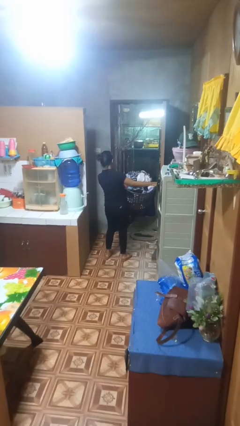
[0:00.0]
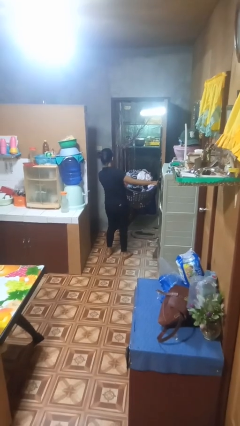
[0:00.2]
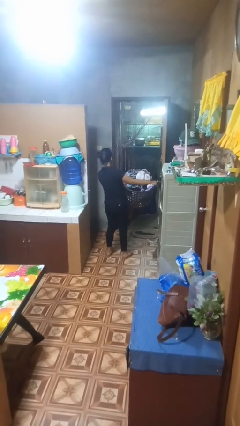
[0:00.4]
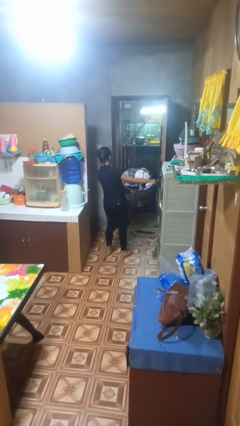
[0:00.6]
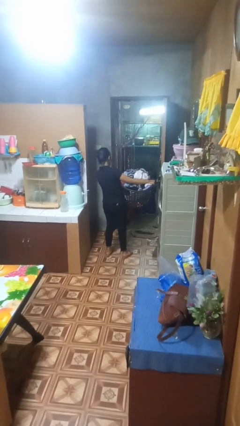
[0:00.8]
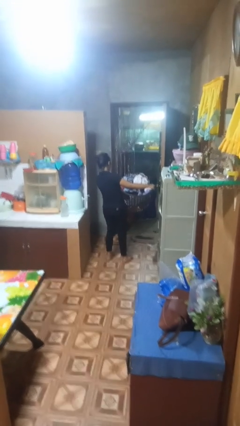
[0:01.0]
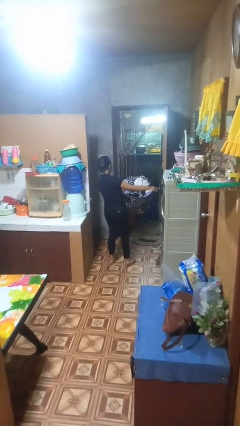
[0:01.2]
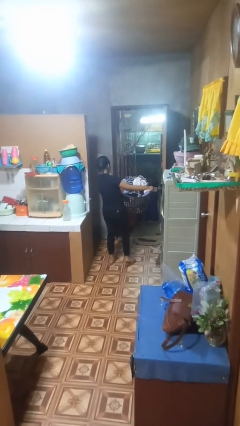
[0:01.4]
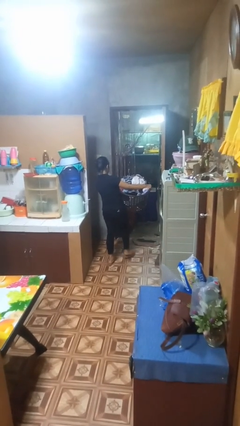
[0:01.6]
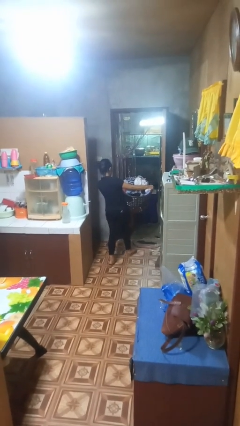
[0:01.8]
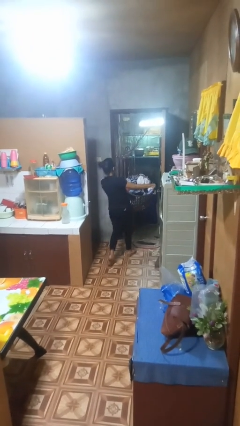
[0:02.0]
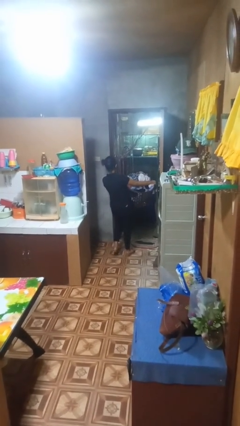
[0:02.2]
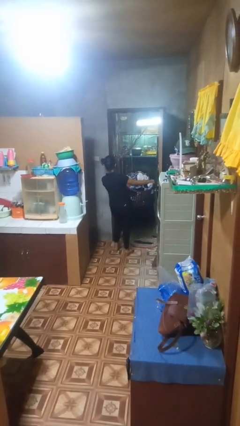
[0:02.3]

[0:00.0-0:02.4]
person carries laundry basket

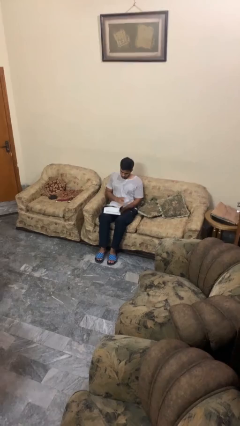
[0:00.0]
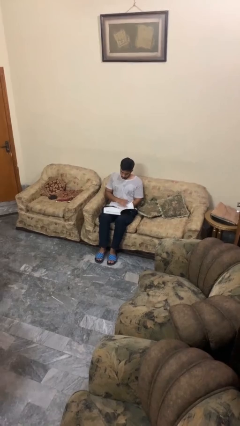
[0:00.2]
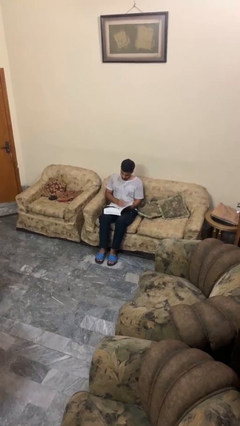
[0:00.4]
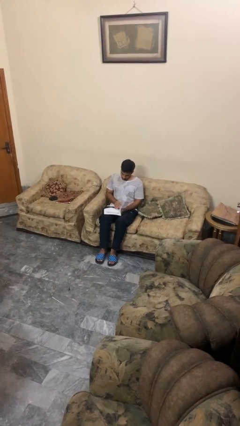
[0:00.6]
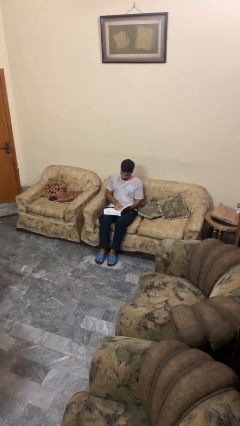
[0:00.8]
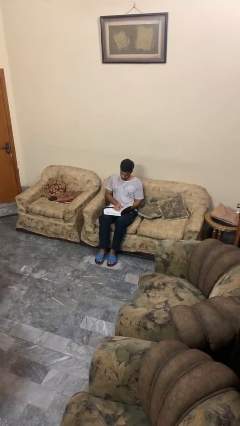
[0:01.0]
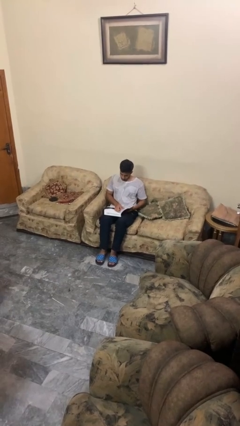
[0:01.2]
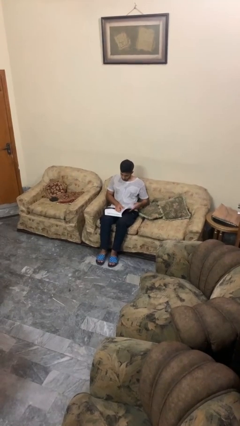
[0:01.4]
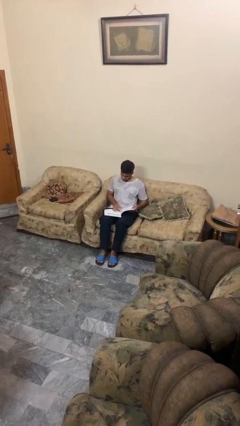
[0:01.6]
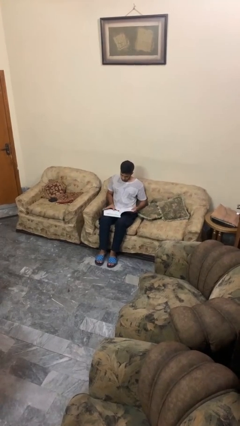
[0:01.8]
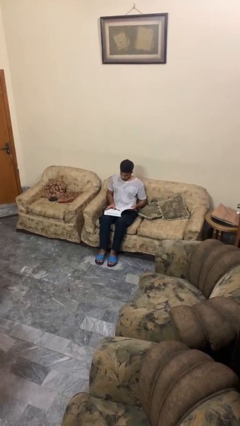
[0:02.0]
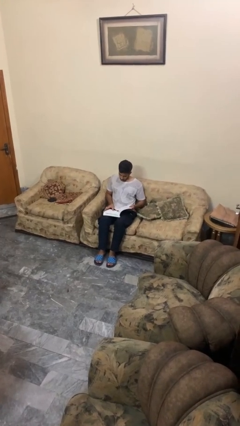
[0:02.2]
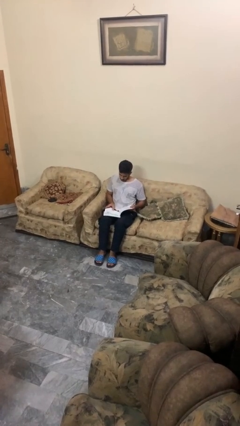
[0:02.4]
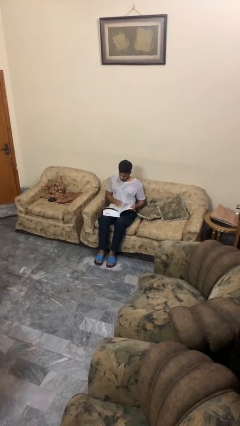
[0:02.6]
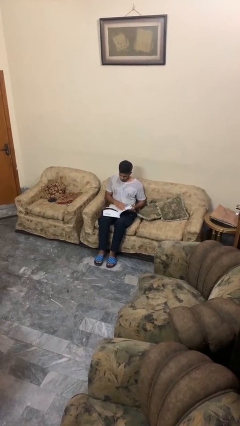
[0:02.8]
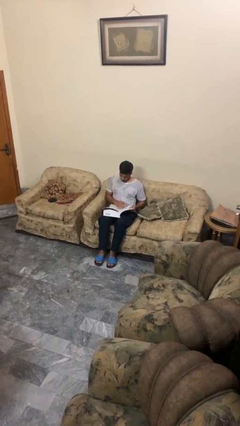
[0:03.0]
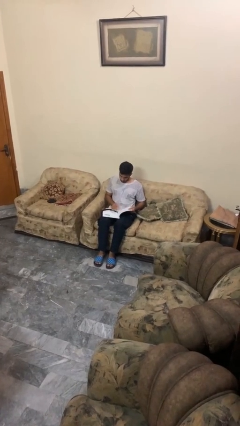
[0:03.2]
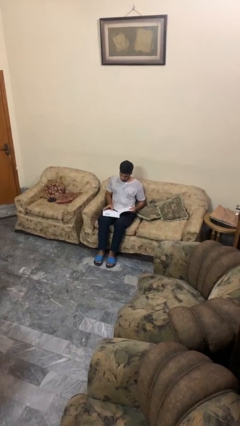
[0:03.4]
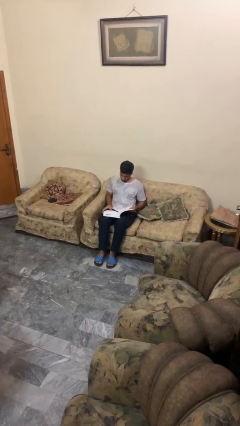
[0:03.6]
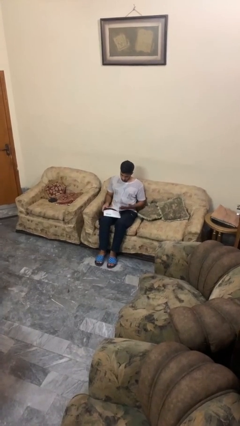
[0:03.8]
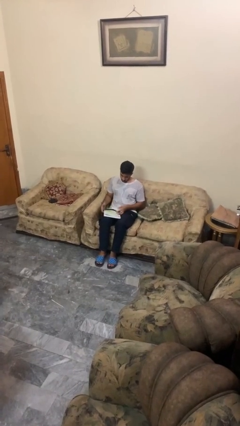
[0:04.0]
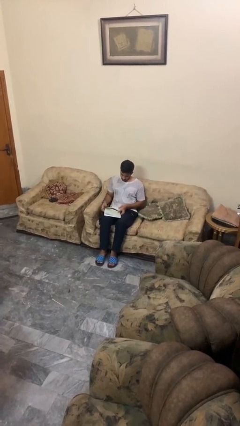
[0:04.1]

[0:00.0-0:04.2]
person reads book

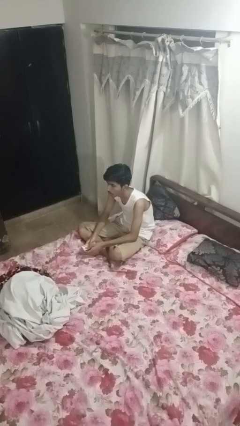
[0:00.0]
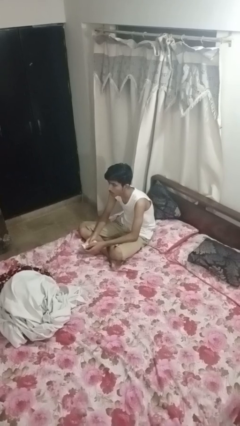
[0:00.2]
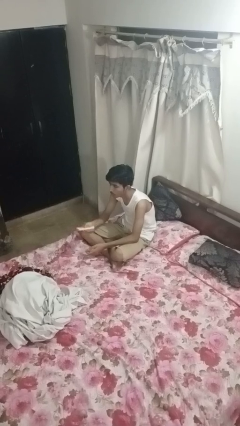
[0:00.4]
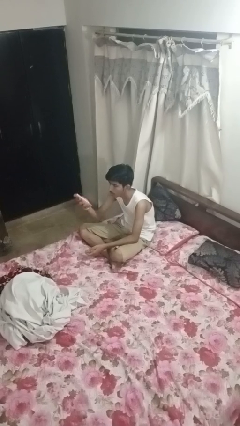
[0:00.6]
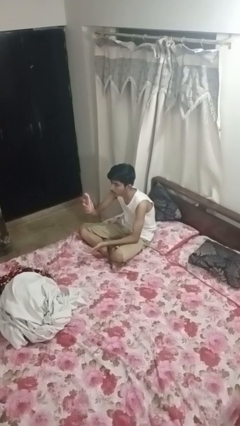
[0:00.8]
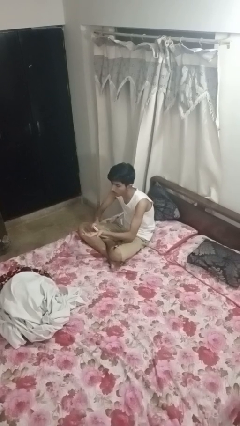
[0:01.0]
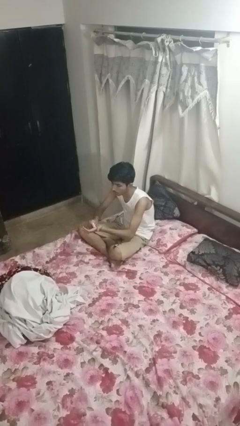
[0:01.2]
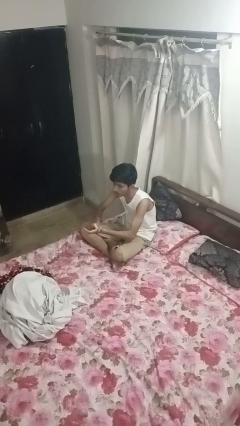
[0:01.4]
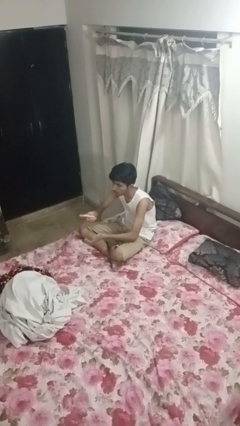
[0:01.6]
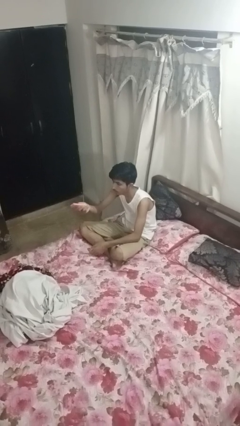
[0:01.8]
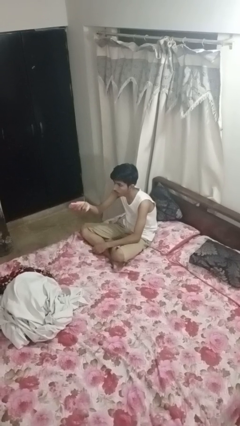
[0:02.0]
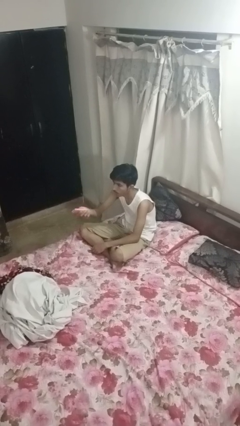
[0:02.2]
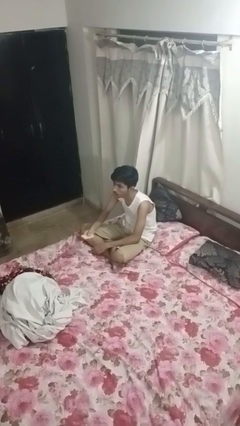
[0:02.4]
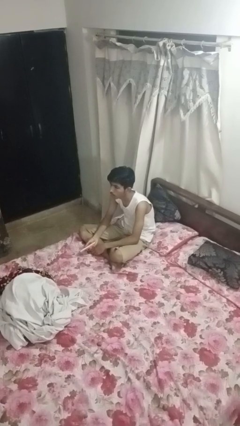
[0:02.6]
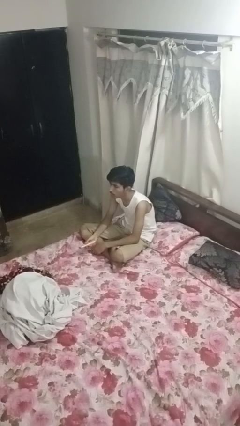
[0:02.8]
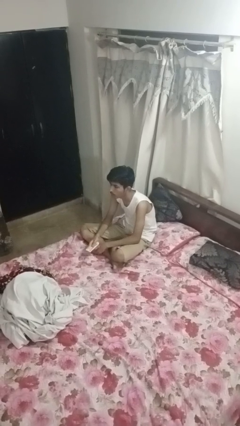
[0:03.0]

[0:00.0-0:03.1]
person uses television remote

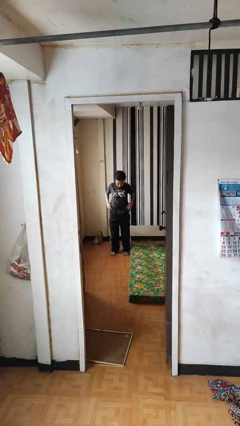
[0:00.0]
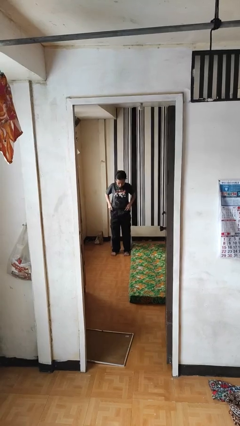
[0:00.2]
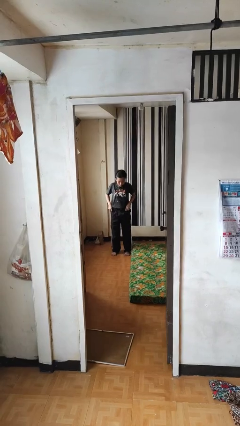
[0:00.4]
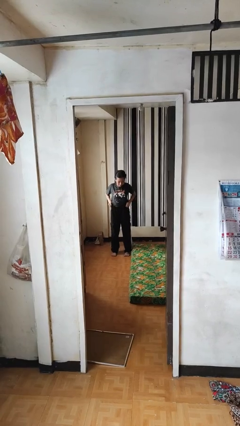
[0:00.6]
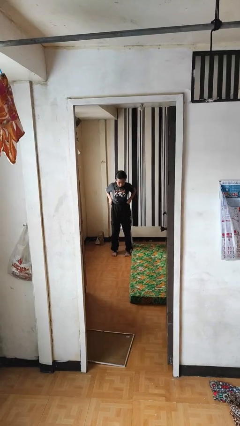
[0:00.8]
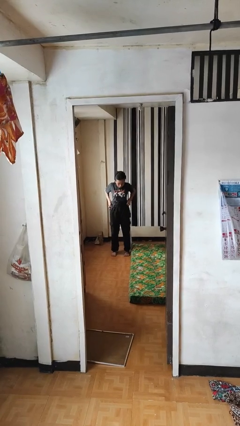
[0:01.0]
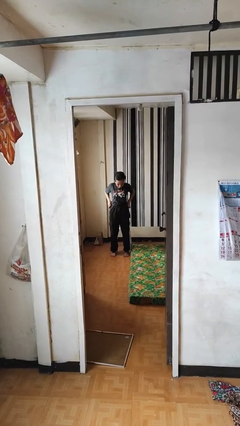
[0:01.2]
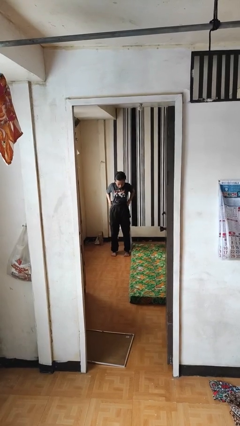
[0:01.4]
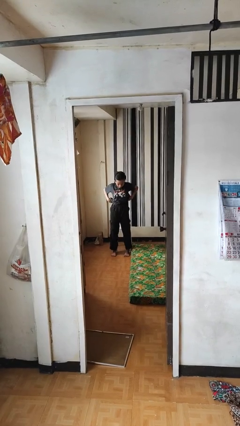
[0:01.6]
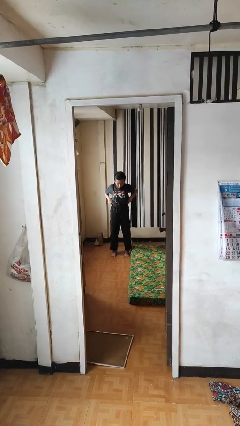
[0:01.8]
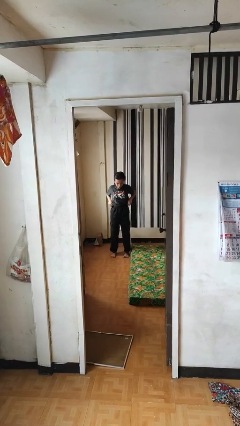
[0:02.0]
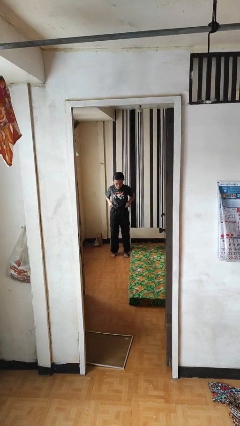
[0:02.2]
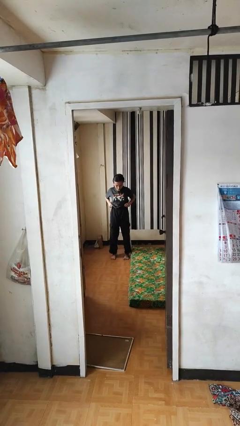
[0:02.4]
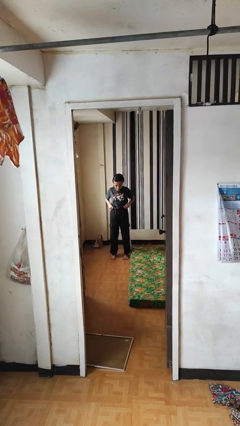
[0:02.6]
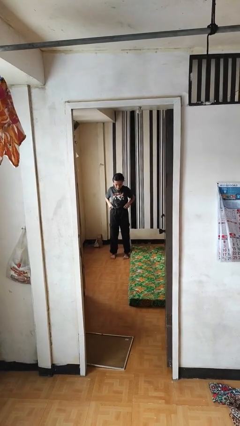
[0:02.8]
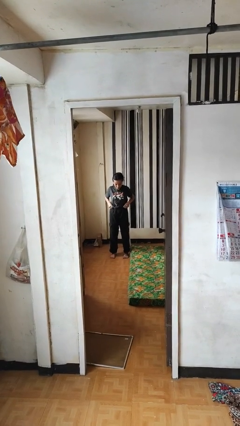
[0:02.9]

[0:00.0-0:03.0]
person hikes up pants

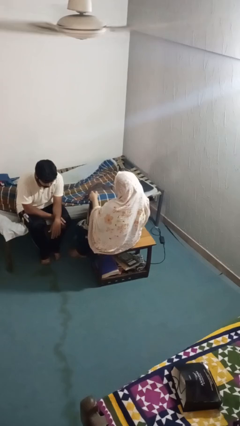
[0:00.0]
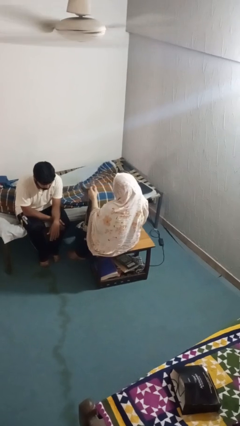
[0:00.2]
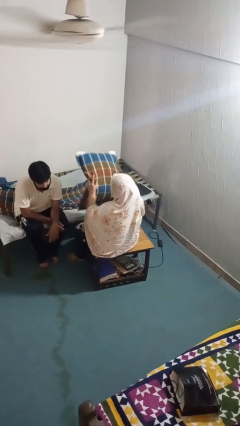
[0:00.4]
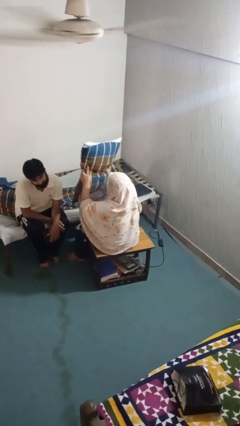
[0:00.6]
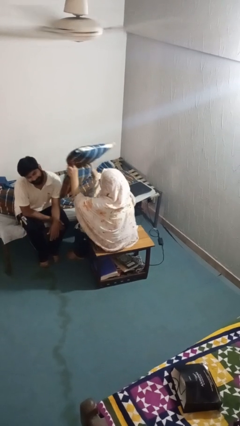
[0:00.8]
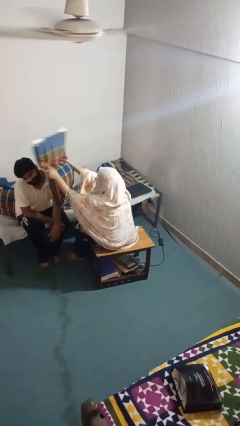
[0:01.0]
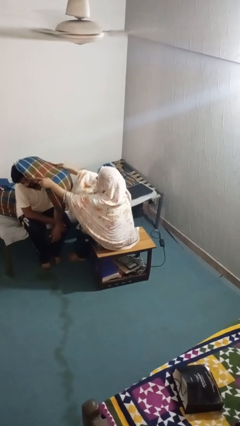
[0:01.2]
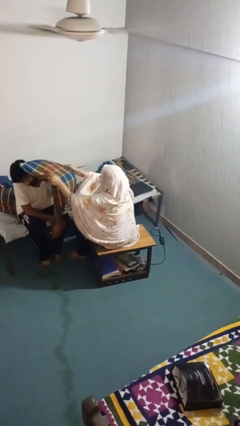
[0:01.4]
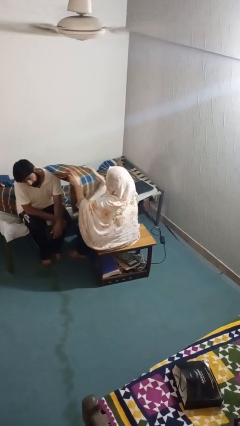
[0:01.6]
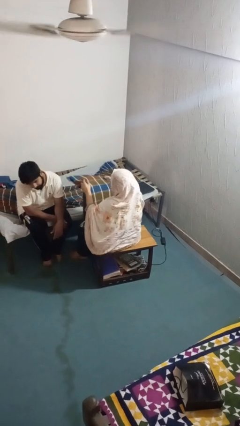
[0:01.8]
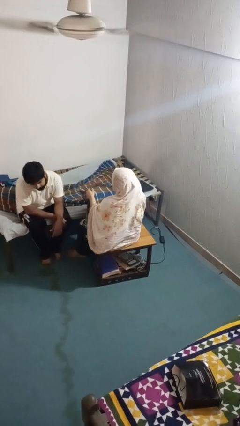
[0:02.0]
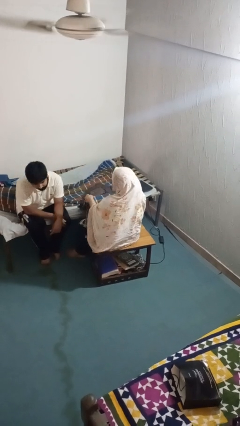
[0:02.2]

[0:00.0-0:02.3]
person hits person with pillow

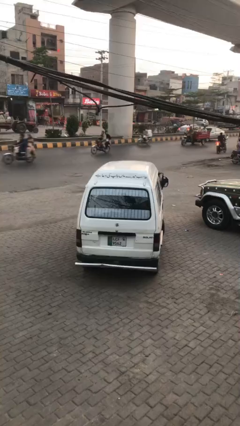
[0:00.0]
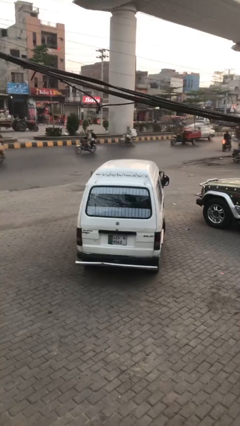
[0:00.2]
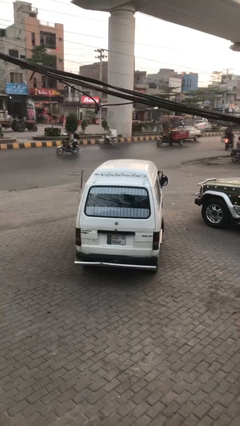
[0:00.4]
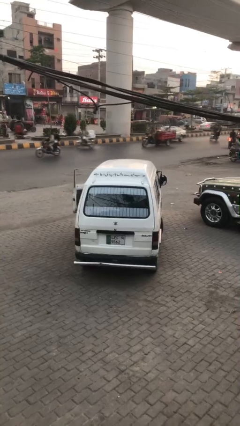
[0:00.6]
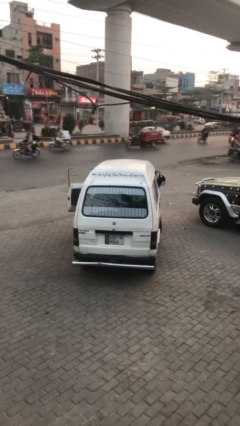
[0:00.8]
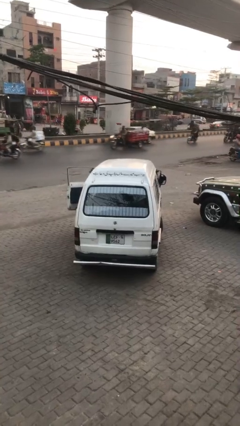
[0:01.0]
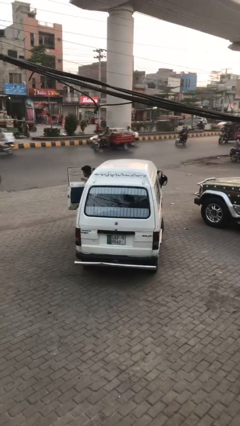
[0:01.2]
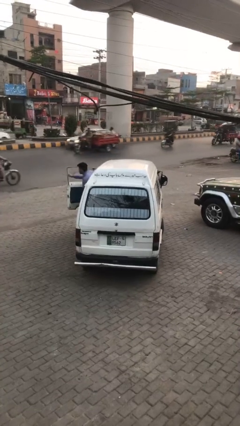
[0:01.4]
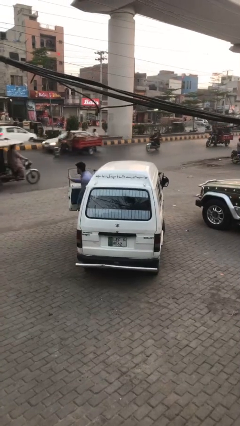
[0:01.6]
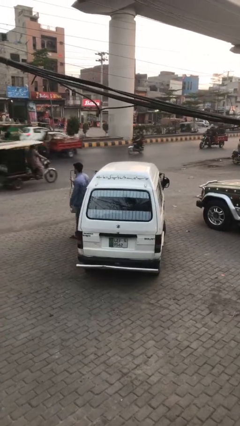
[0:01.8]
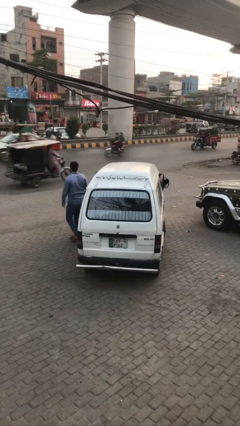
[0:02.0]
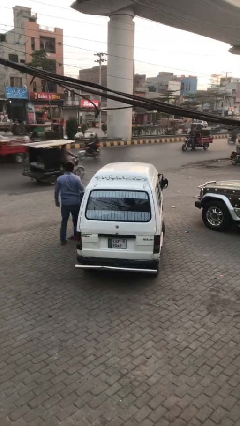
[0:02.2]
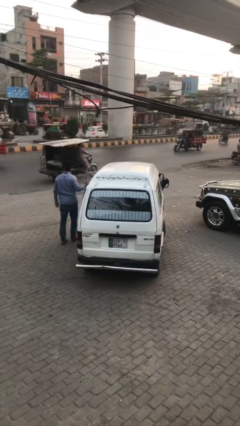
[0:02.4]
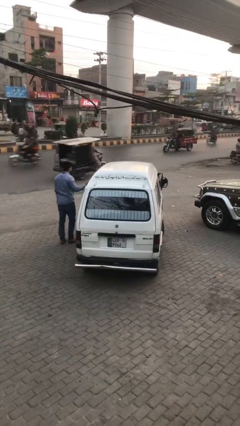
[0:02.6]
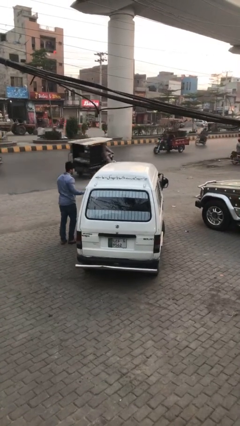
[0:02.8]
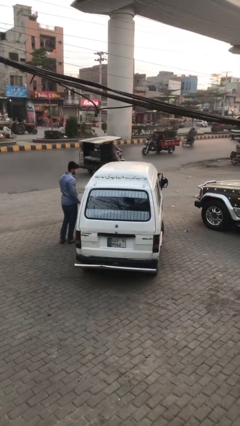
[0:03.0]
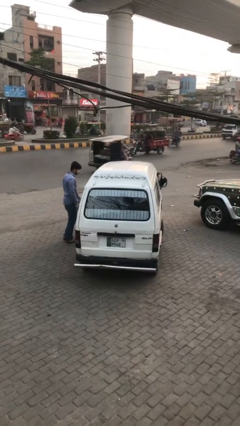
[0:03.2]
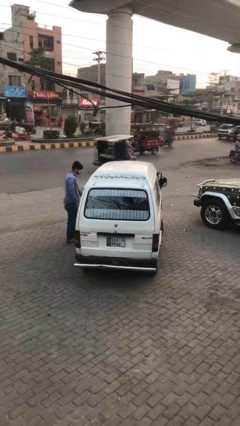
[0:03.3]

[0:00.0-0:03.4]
car drops off person
